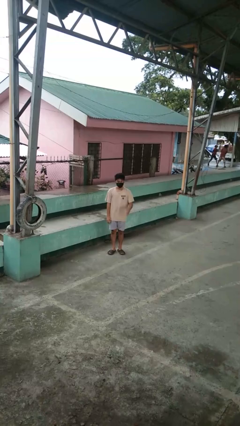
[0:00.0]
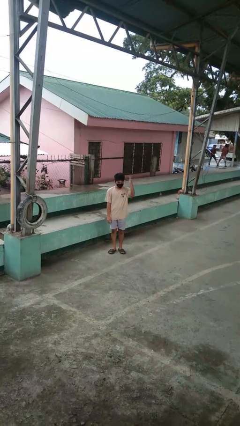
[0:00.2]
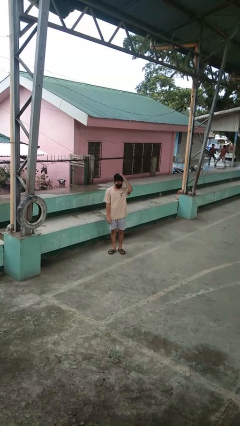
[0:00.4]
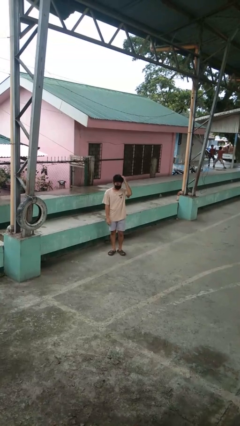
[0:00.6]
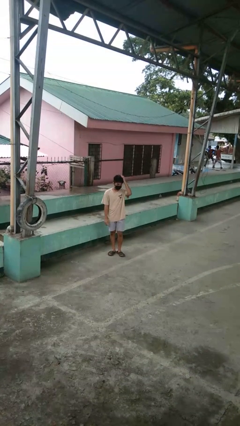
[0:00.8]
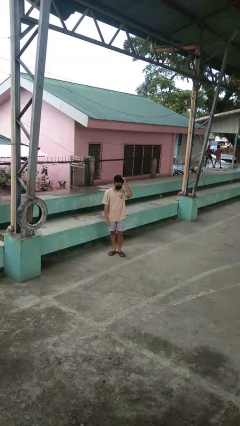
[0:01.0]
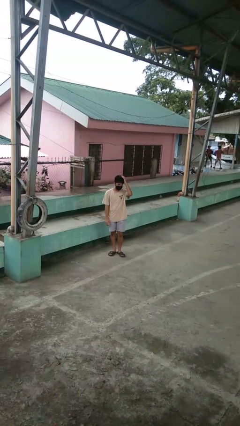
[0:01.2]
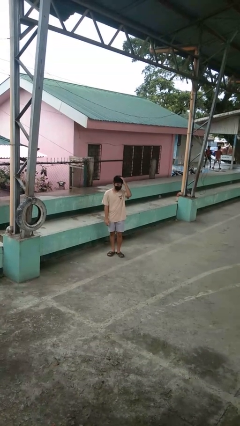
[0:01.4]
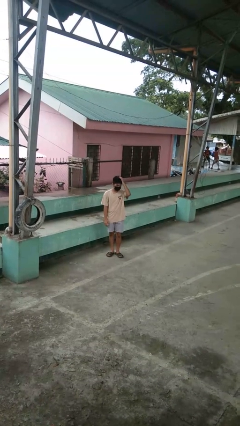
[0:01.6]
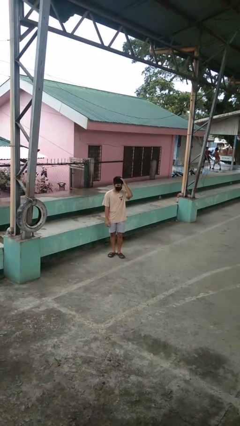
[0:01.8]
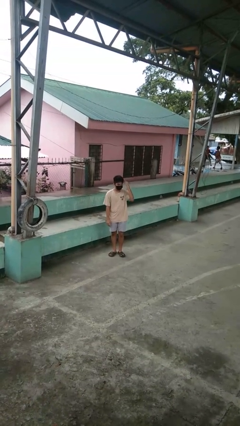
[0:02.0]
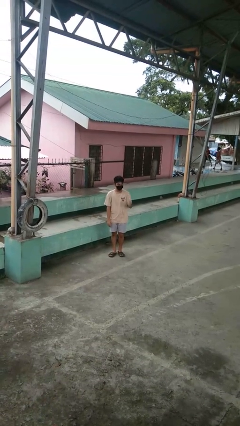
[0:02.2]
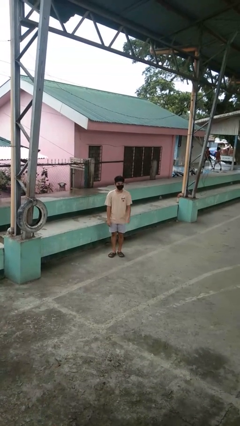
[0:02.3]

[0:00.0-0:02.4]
person pats head

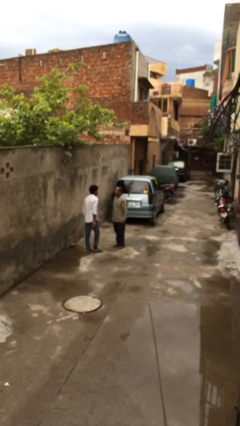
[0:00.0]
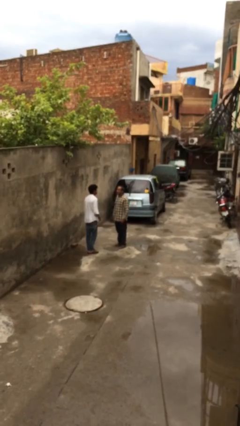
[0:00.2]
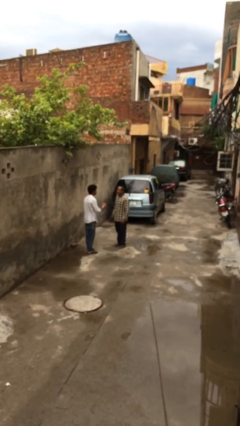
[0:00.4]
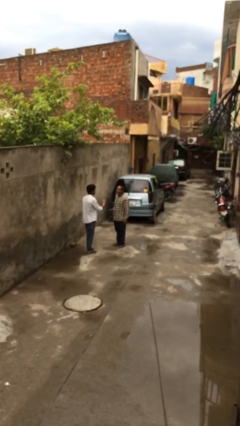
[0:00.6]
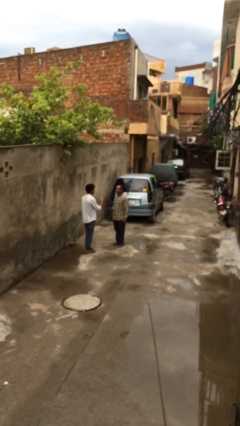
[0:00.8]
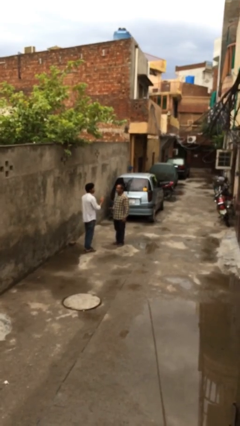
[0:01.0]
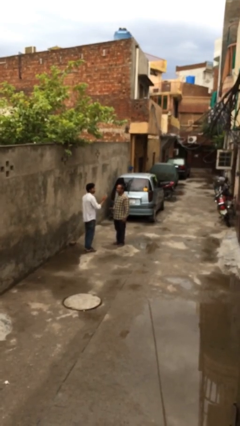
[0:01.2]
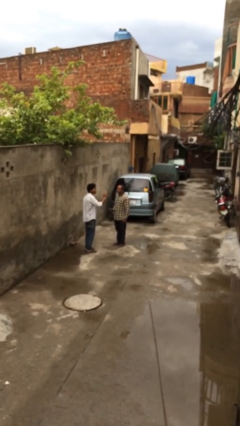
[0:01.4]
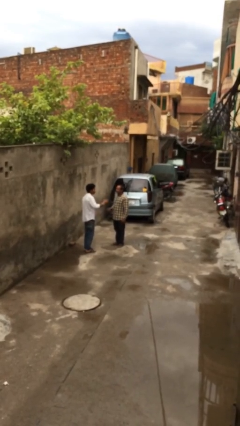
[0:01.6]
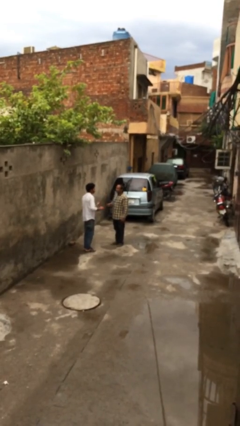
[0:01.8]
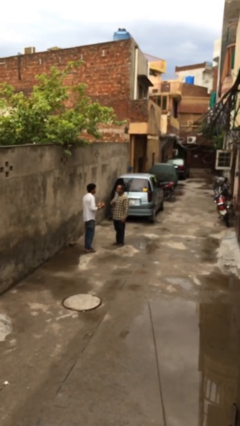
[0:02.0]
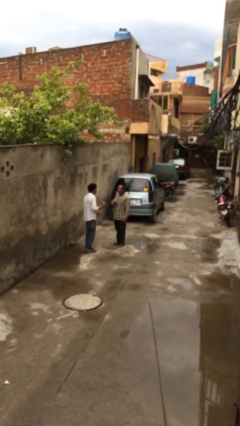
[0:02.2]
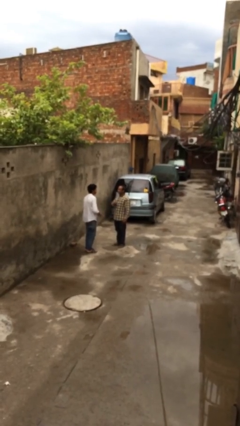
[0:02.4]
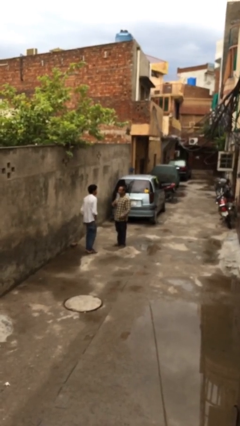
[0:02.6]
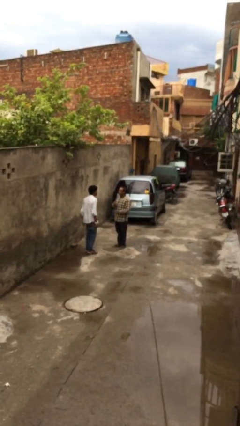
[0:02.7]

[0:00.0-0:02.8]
person talks to person

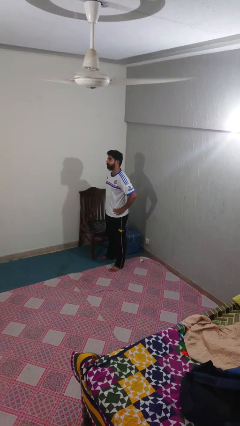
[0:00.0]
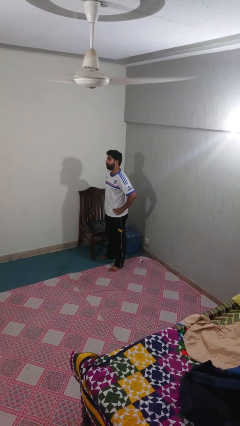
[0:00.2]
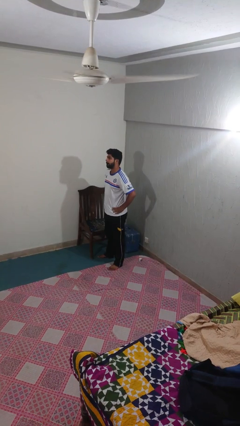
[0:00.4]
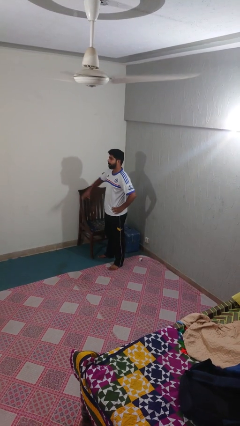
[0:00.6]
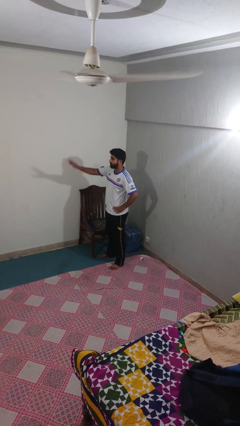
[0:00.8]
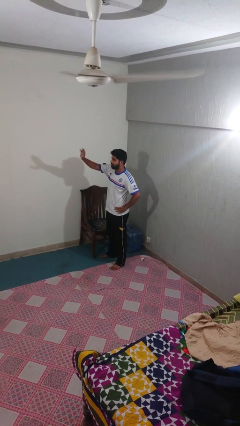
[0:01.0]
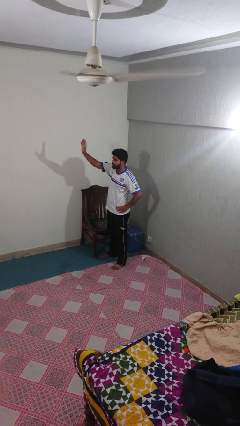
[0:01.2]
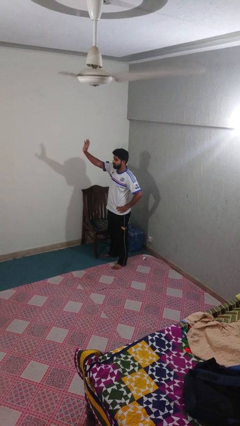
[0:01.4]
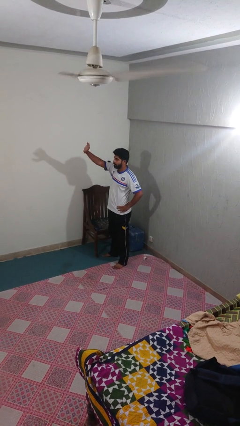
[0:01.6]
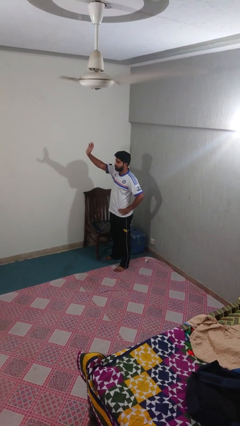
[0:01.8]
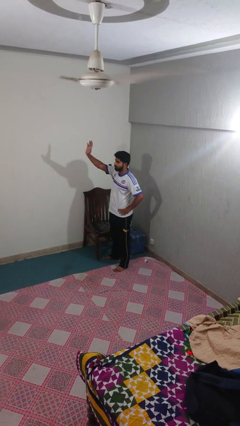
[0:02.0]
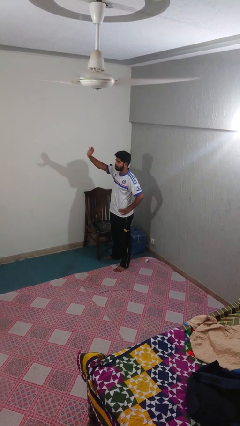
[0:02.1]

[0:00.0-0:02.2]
person waves at person

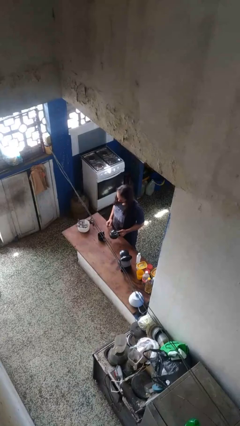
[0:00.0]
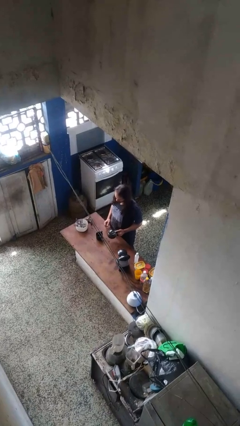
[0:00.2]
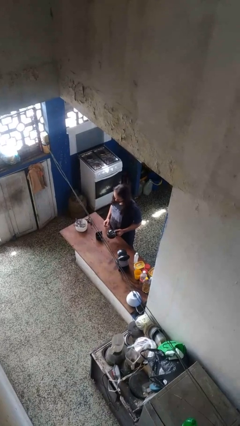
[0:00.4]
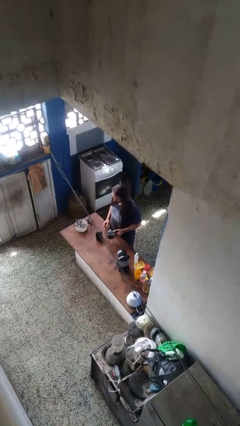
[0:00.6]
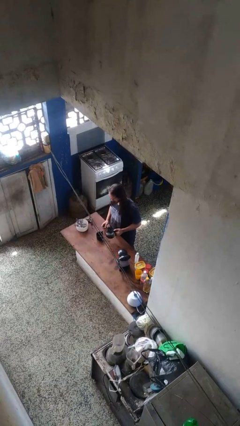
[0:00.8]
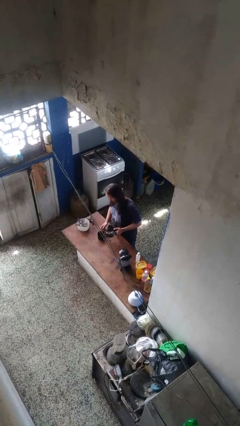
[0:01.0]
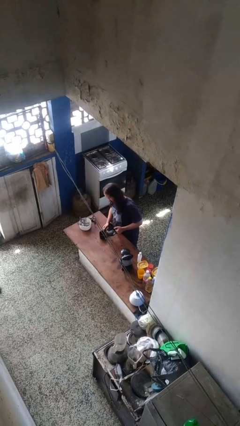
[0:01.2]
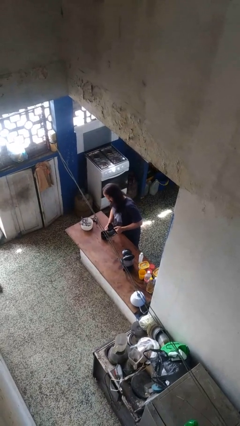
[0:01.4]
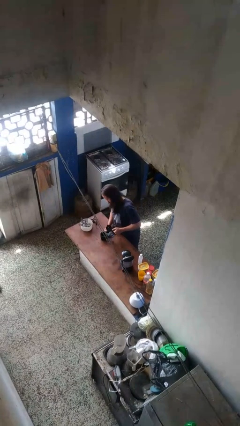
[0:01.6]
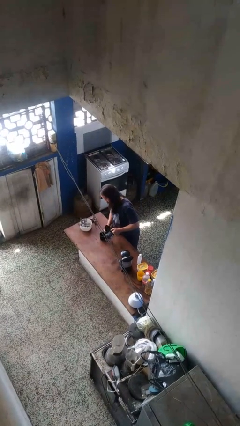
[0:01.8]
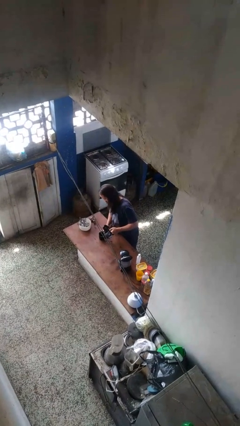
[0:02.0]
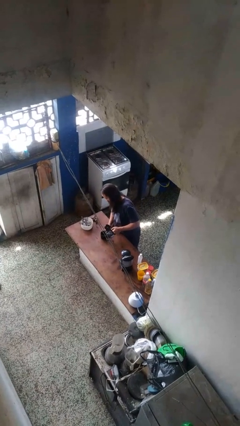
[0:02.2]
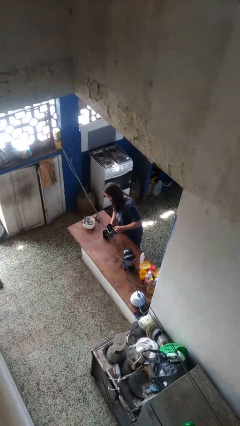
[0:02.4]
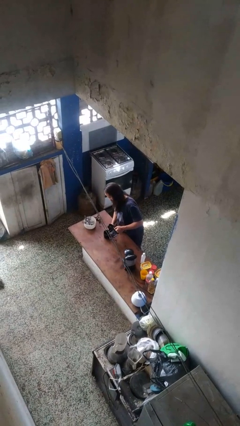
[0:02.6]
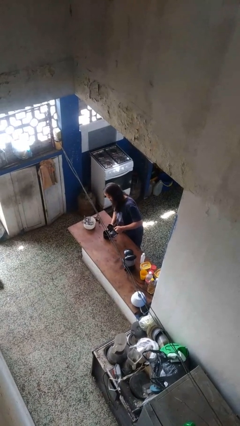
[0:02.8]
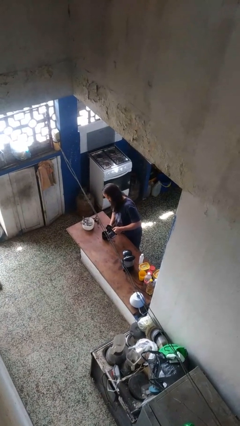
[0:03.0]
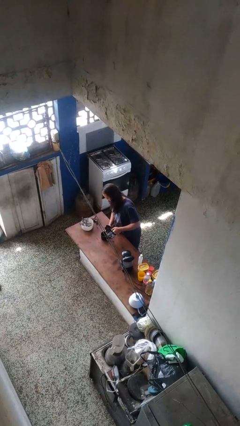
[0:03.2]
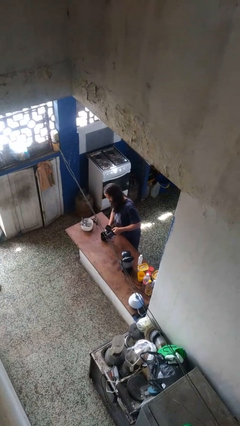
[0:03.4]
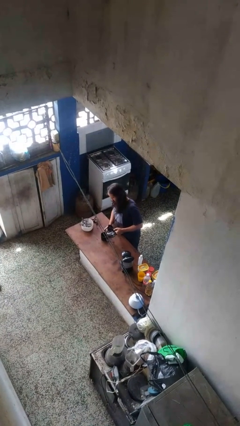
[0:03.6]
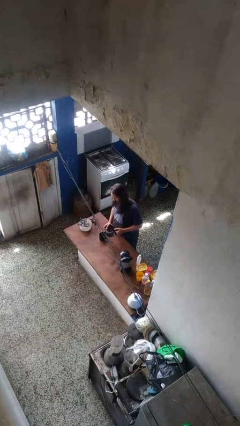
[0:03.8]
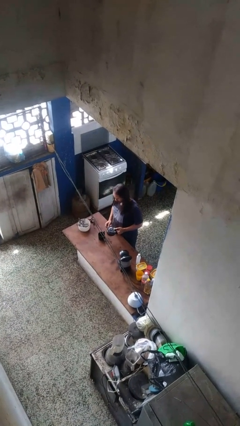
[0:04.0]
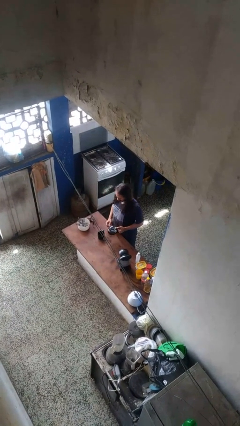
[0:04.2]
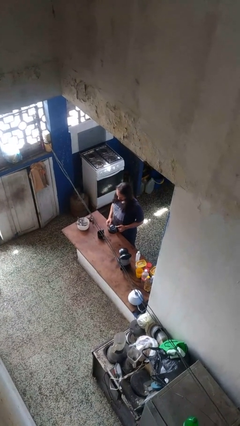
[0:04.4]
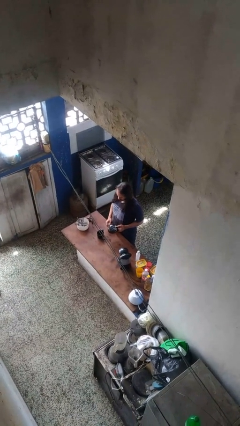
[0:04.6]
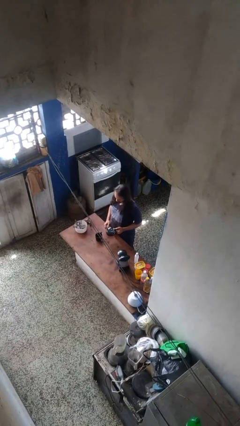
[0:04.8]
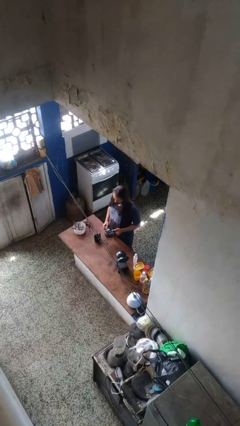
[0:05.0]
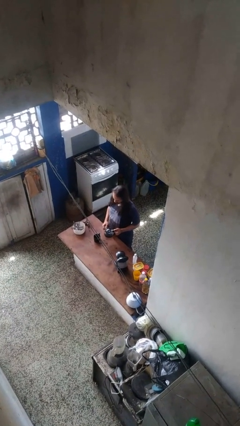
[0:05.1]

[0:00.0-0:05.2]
person pours coffee into mug

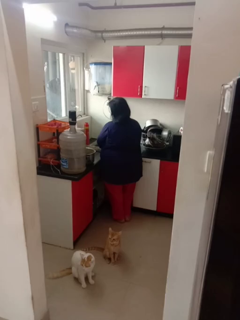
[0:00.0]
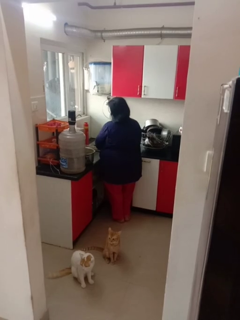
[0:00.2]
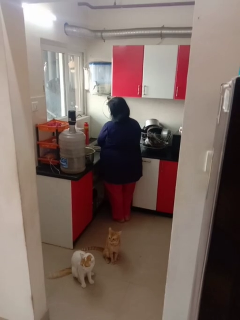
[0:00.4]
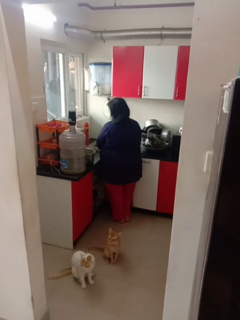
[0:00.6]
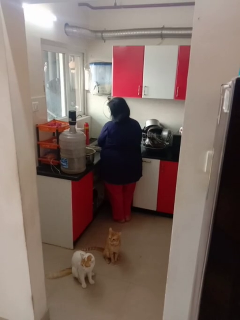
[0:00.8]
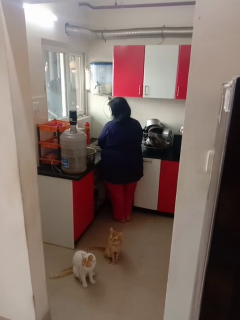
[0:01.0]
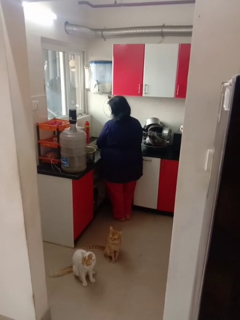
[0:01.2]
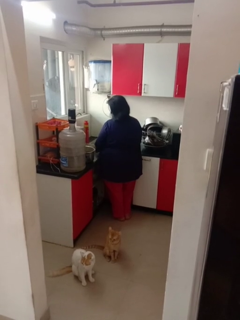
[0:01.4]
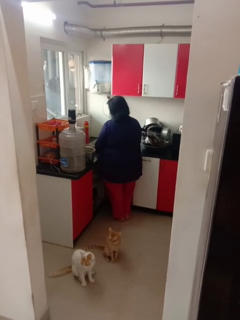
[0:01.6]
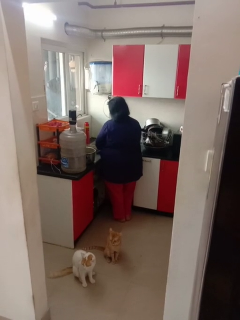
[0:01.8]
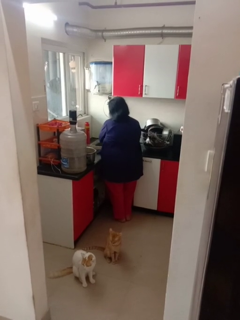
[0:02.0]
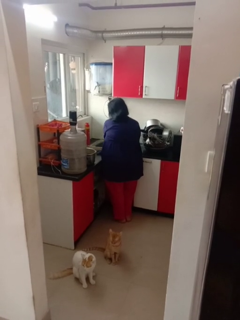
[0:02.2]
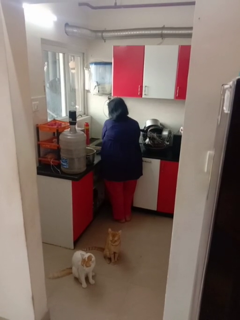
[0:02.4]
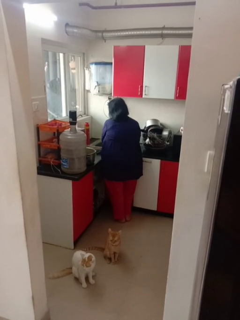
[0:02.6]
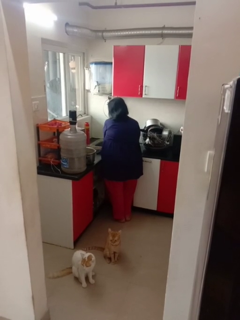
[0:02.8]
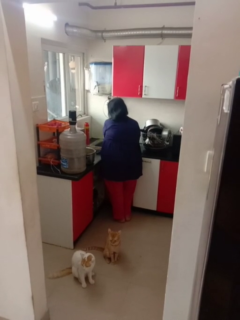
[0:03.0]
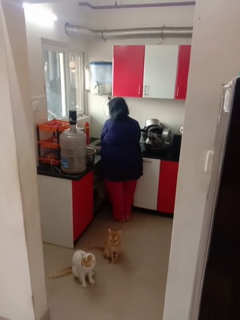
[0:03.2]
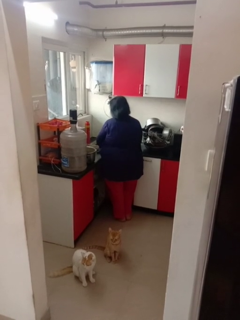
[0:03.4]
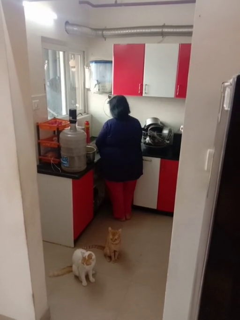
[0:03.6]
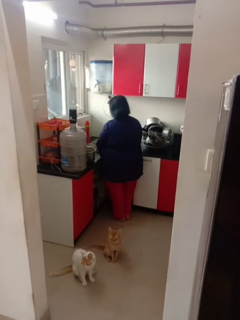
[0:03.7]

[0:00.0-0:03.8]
person washes dish

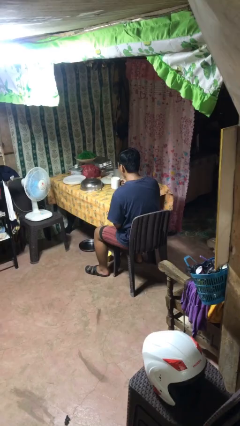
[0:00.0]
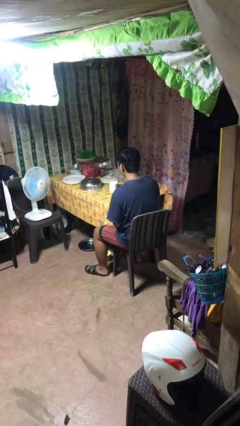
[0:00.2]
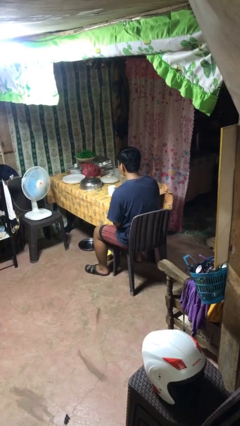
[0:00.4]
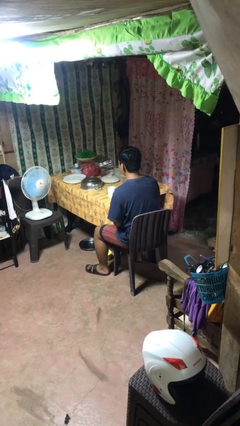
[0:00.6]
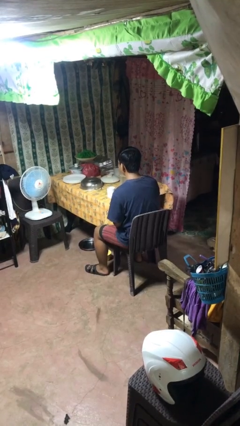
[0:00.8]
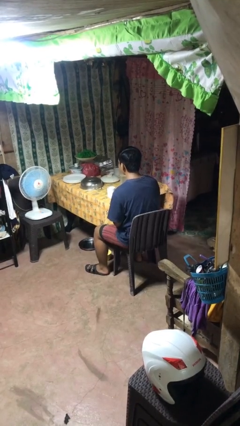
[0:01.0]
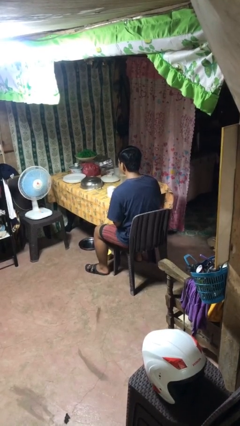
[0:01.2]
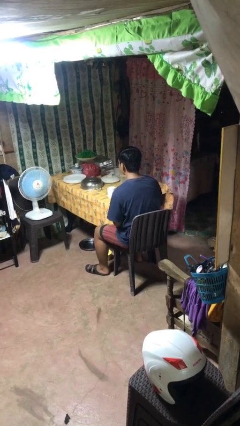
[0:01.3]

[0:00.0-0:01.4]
person puts down object on table

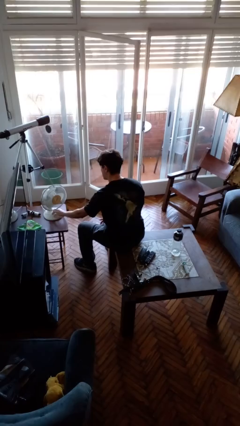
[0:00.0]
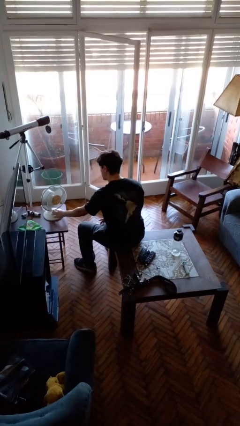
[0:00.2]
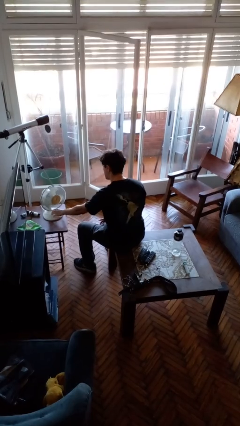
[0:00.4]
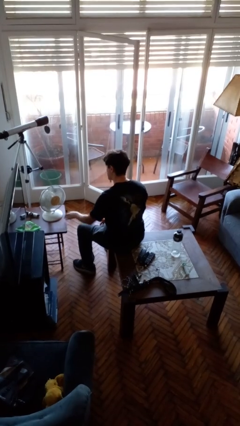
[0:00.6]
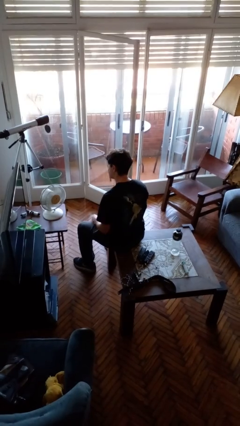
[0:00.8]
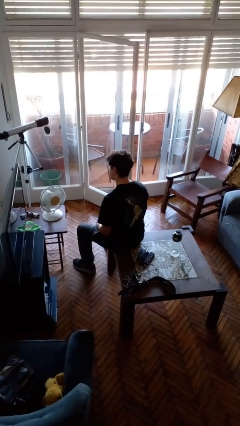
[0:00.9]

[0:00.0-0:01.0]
person turns on fan
